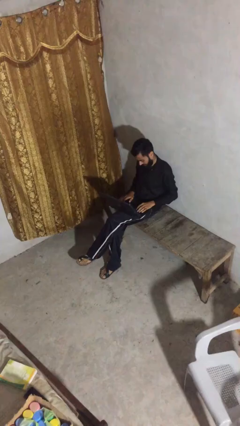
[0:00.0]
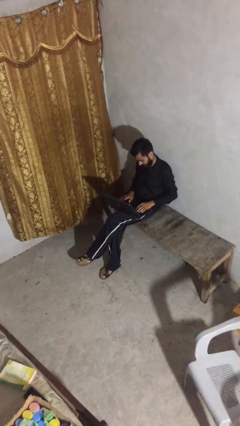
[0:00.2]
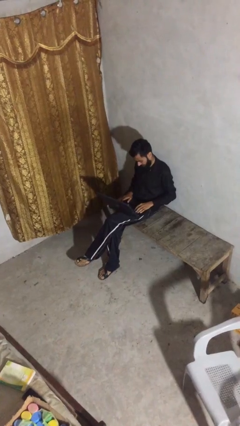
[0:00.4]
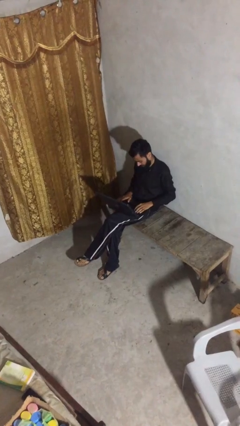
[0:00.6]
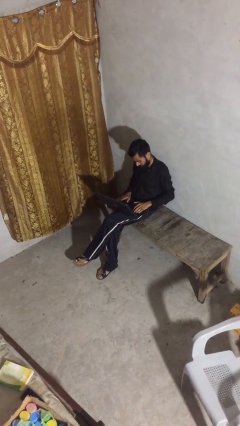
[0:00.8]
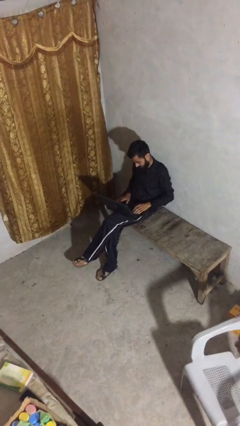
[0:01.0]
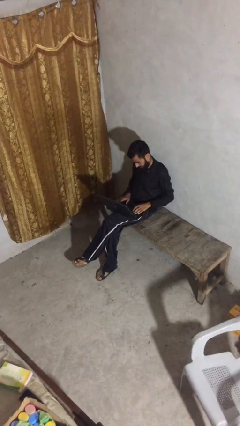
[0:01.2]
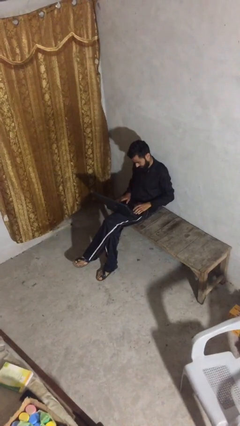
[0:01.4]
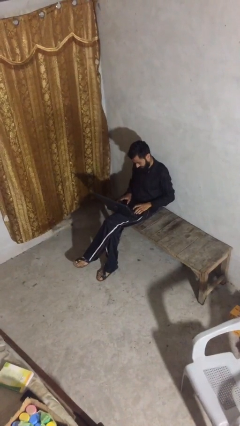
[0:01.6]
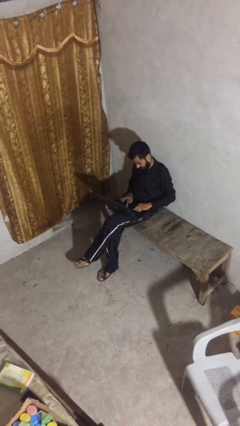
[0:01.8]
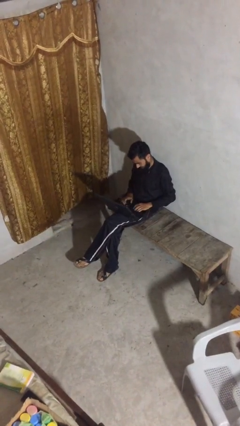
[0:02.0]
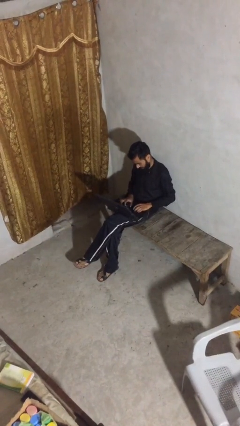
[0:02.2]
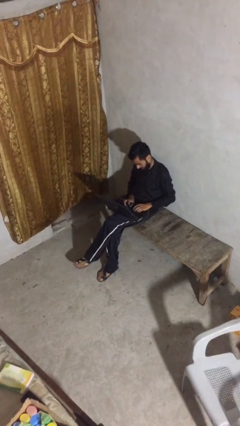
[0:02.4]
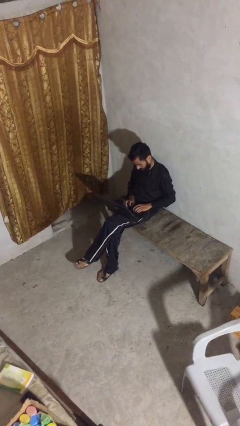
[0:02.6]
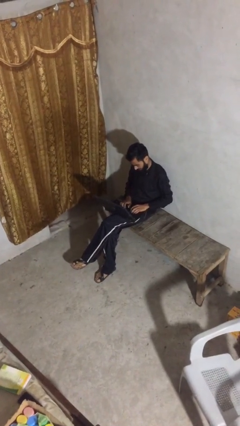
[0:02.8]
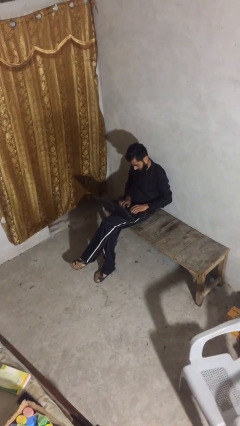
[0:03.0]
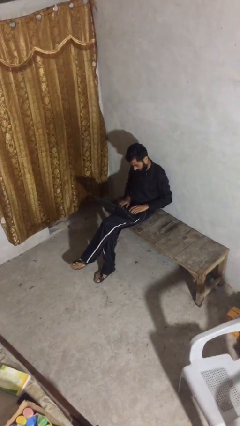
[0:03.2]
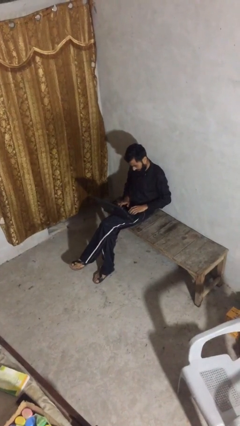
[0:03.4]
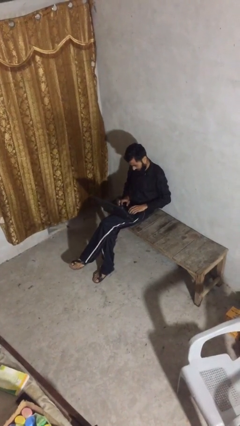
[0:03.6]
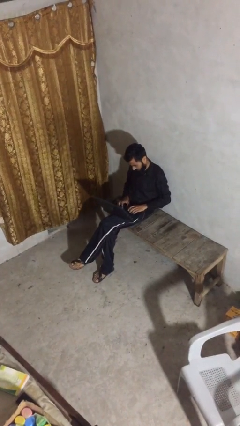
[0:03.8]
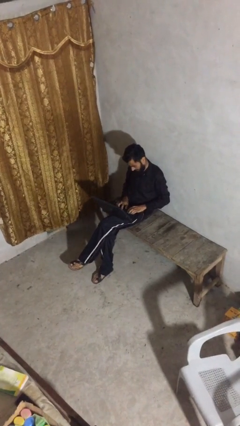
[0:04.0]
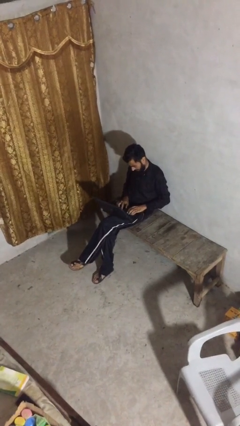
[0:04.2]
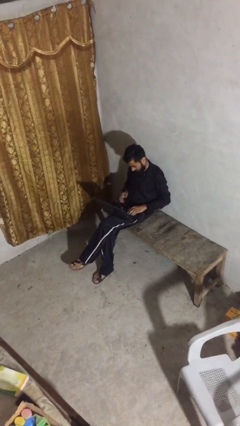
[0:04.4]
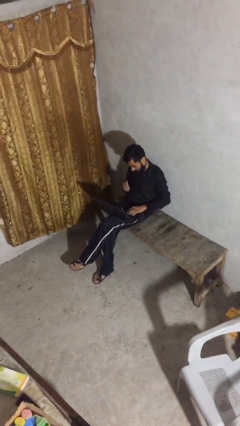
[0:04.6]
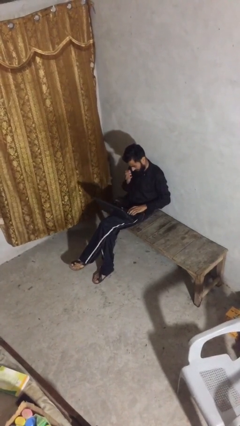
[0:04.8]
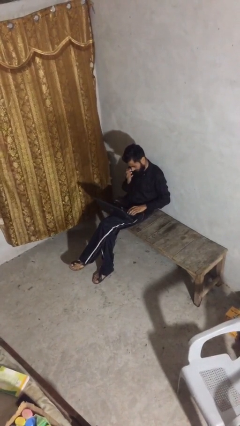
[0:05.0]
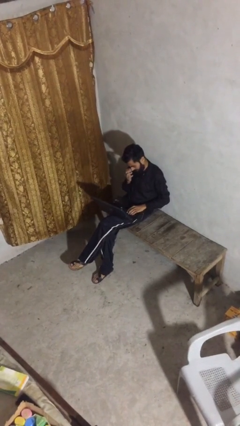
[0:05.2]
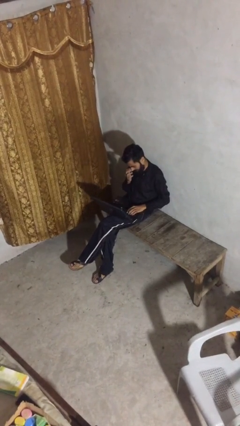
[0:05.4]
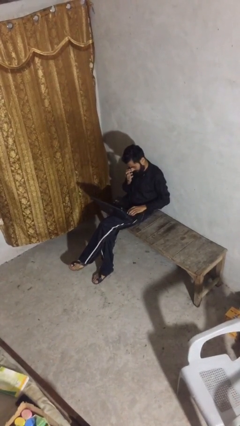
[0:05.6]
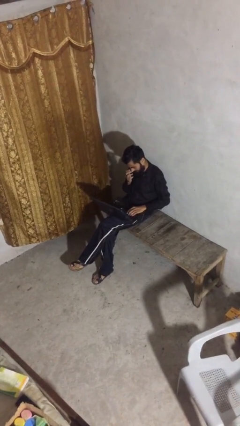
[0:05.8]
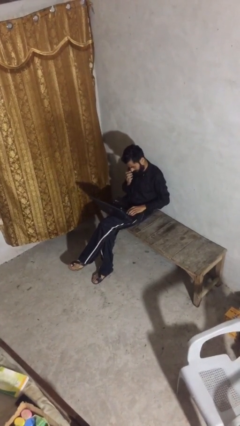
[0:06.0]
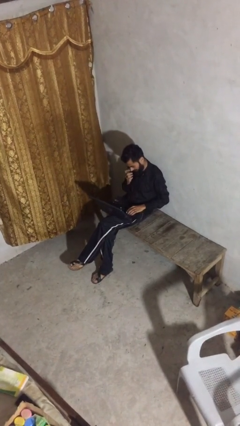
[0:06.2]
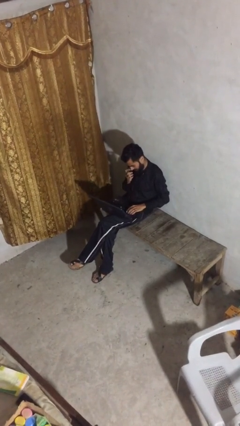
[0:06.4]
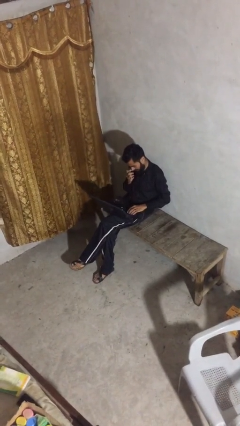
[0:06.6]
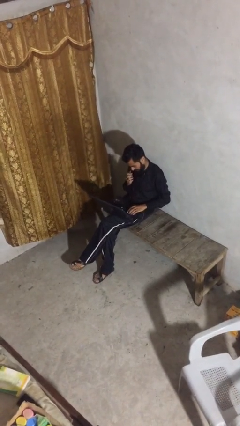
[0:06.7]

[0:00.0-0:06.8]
person interacts with laptop

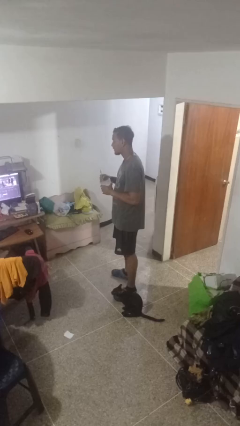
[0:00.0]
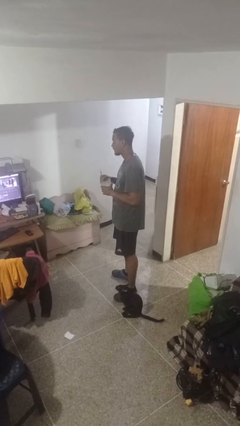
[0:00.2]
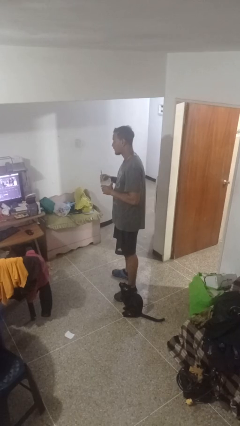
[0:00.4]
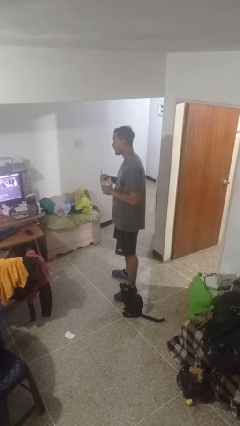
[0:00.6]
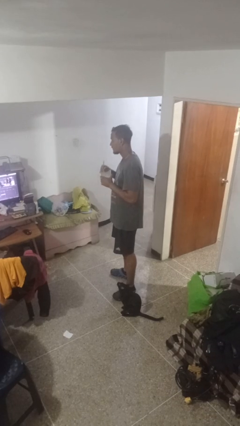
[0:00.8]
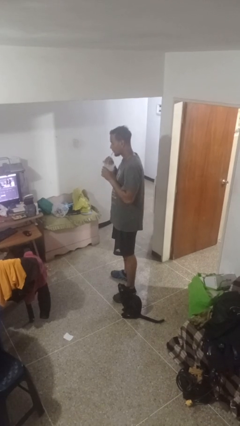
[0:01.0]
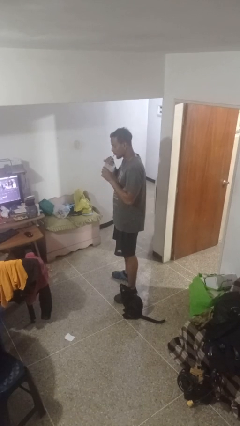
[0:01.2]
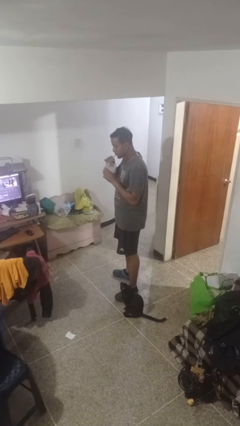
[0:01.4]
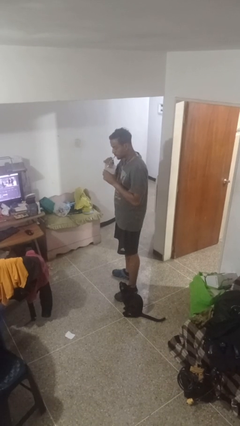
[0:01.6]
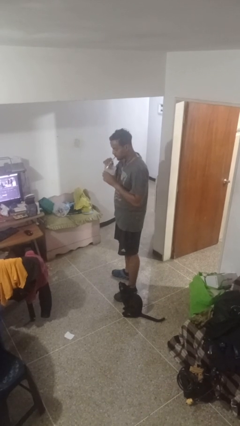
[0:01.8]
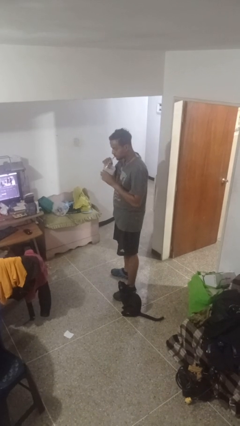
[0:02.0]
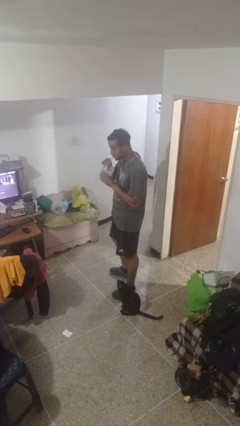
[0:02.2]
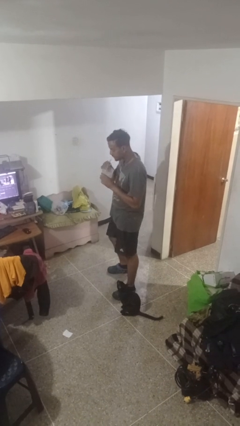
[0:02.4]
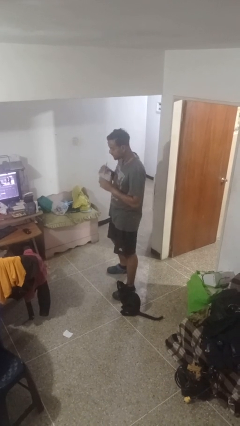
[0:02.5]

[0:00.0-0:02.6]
person drinks from straw

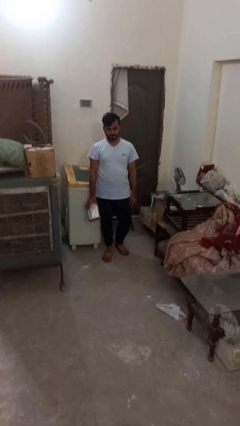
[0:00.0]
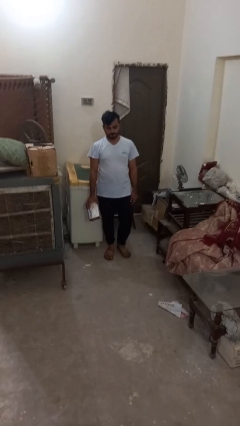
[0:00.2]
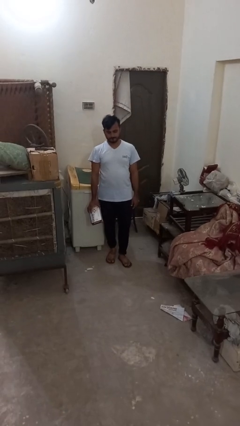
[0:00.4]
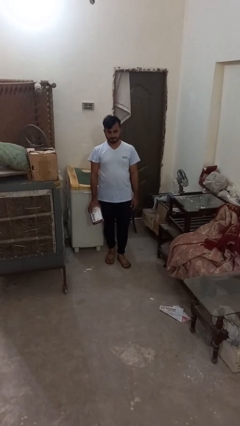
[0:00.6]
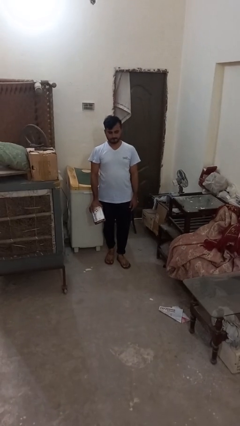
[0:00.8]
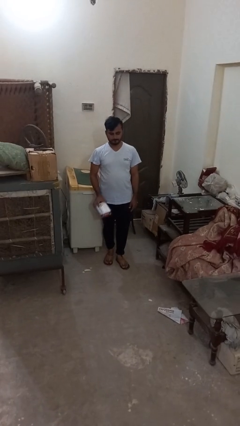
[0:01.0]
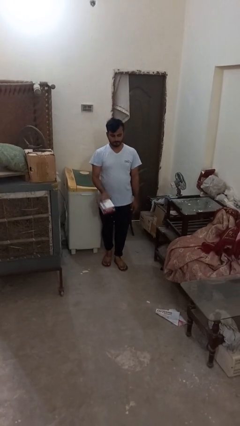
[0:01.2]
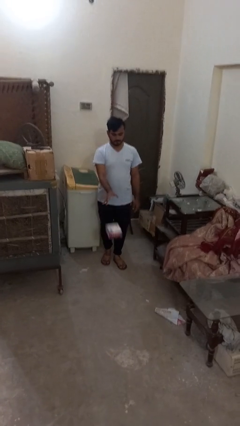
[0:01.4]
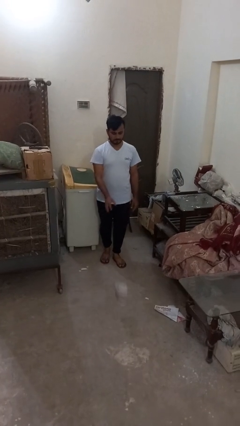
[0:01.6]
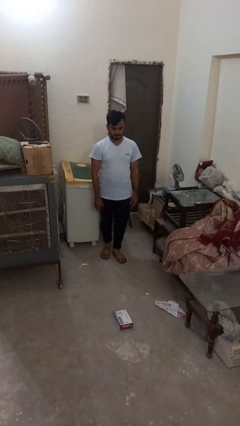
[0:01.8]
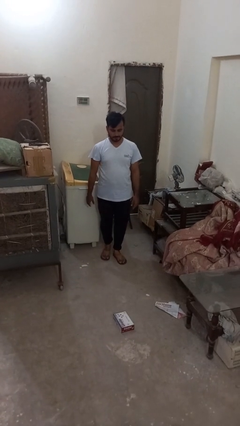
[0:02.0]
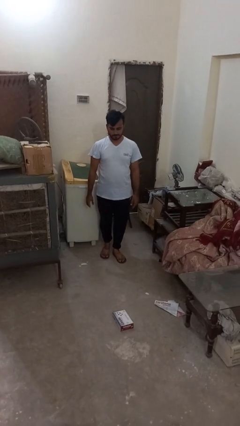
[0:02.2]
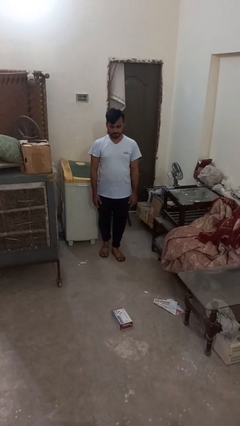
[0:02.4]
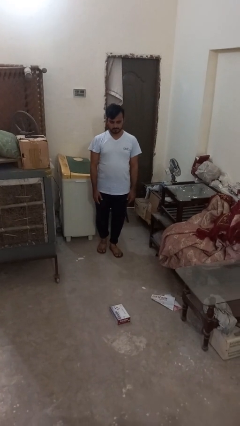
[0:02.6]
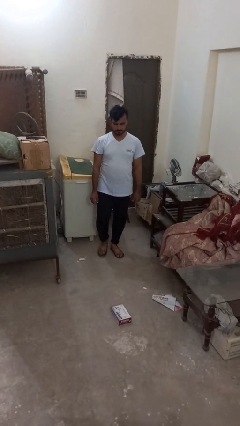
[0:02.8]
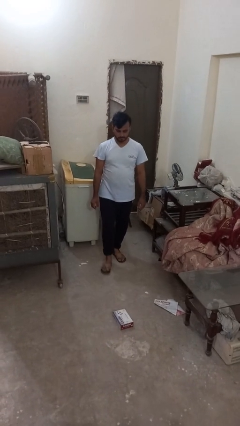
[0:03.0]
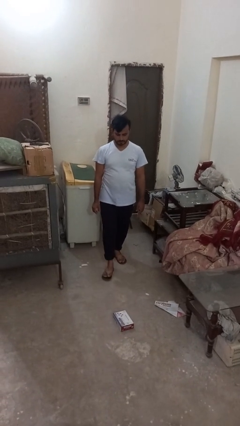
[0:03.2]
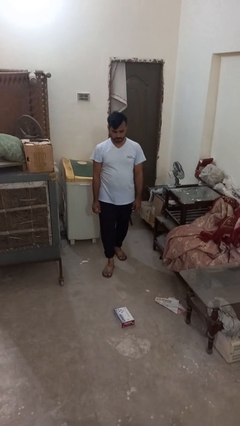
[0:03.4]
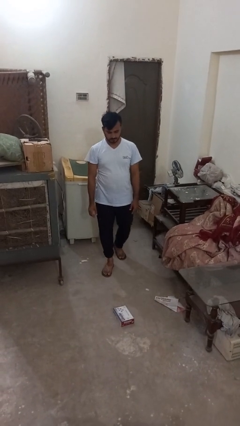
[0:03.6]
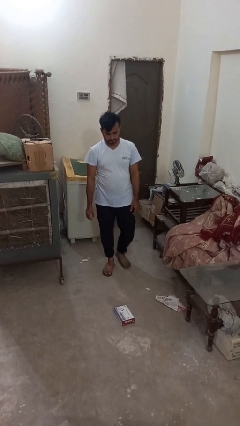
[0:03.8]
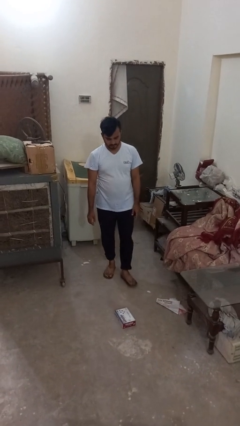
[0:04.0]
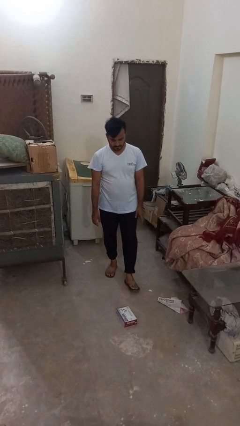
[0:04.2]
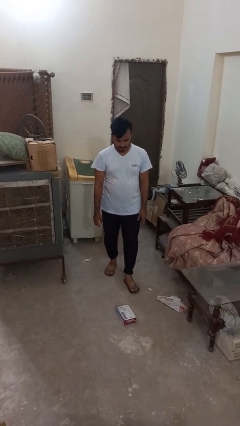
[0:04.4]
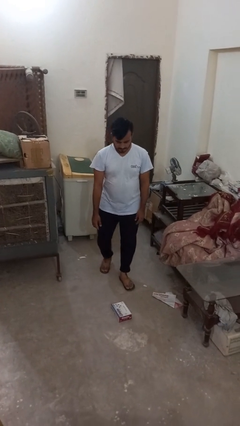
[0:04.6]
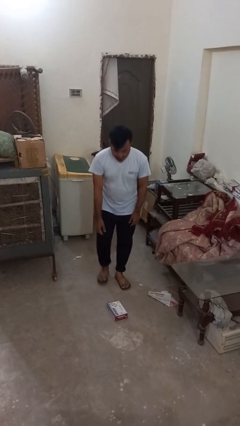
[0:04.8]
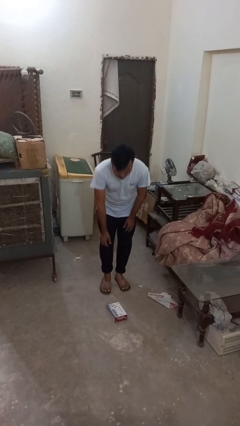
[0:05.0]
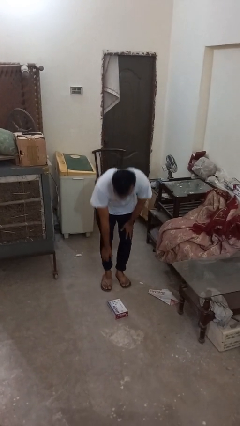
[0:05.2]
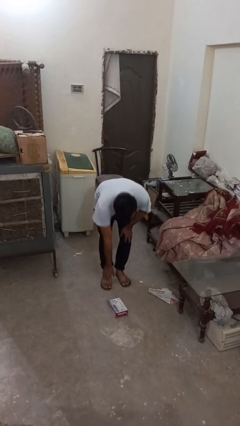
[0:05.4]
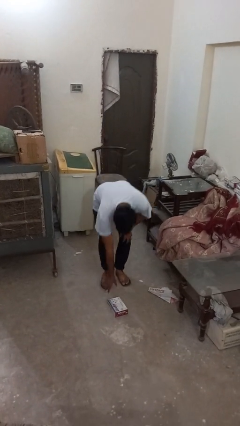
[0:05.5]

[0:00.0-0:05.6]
person throws object to ground

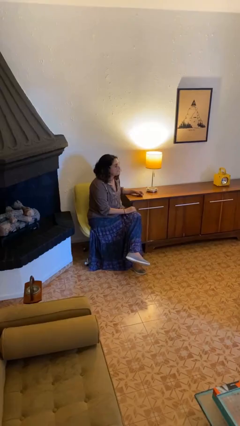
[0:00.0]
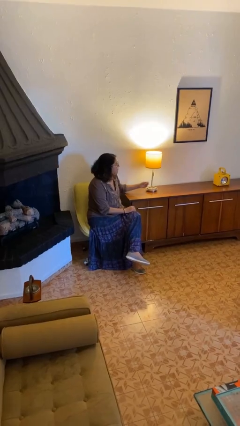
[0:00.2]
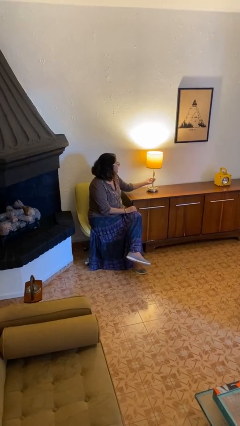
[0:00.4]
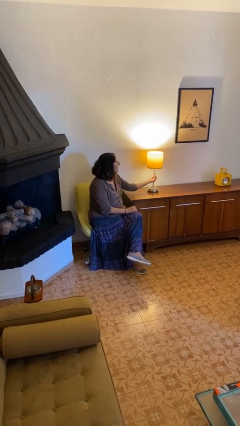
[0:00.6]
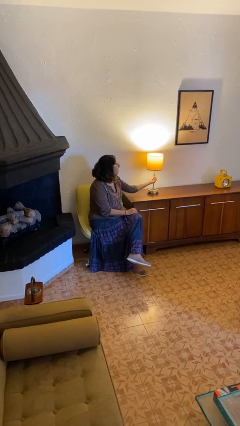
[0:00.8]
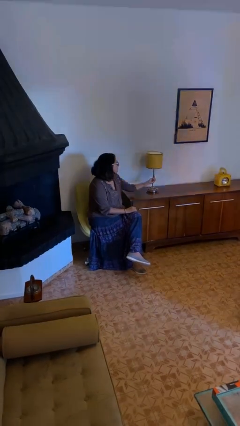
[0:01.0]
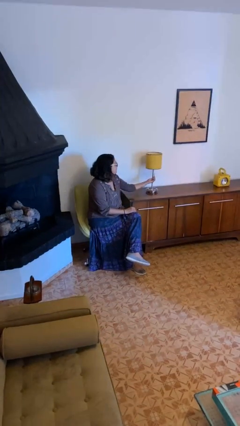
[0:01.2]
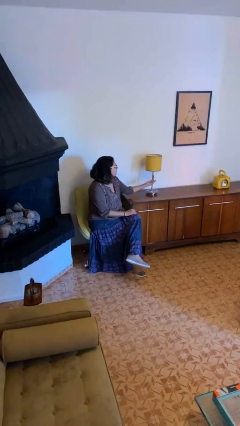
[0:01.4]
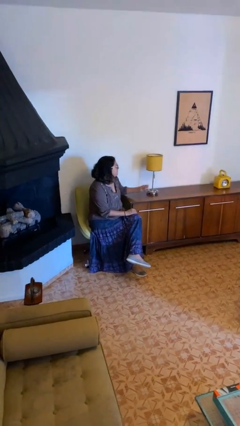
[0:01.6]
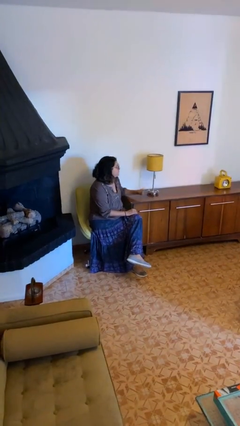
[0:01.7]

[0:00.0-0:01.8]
person turns off lamp

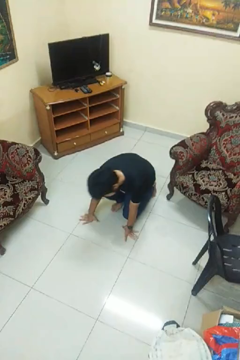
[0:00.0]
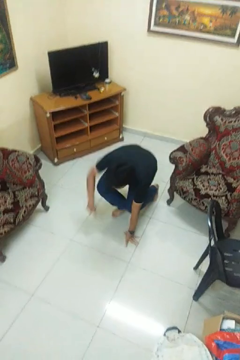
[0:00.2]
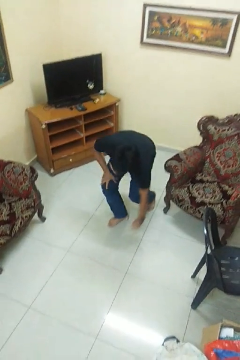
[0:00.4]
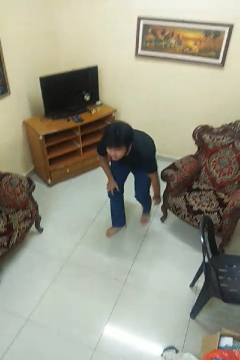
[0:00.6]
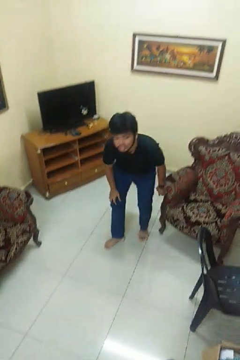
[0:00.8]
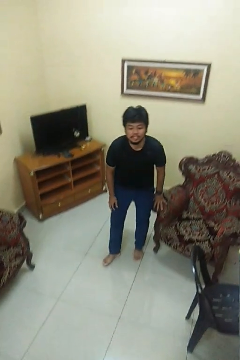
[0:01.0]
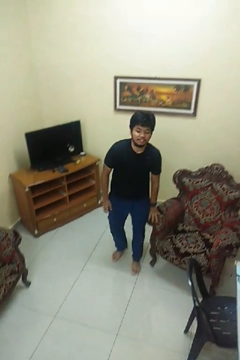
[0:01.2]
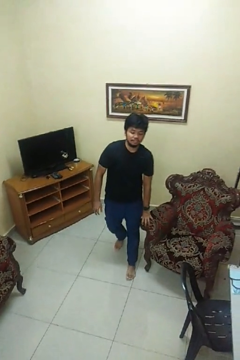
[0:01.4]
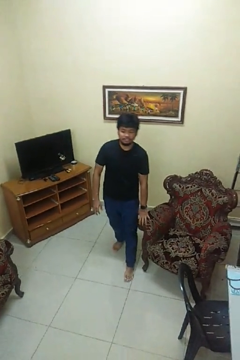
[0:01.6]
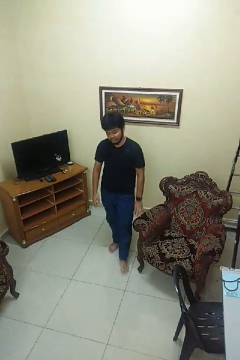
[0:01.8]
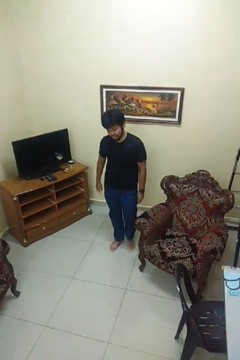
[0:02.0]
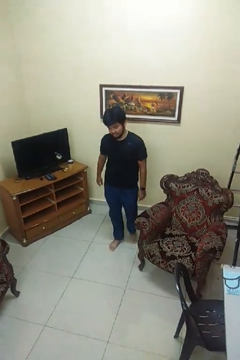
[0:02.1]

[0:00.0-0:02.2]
person stands up from floor
